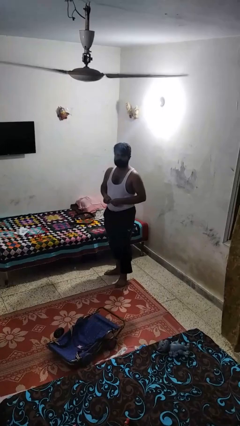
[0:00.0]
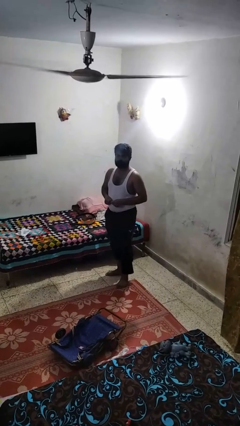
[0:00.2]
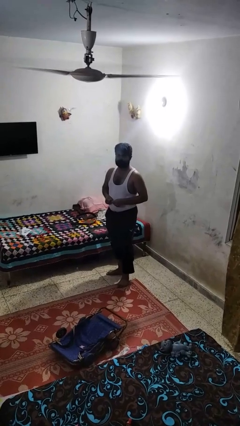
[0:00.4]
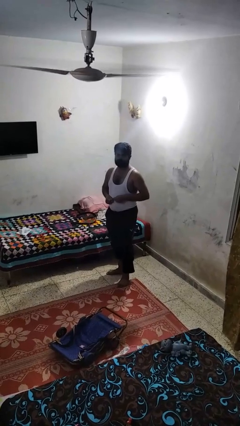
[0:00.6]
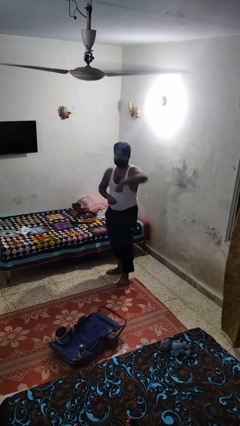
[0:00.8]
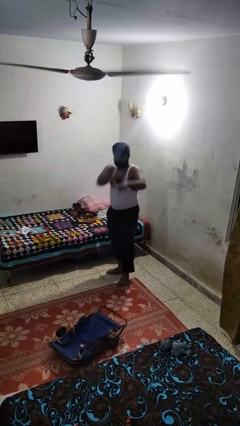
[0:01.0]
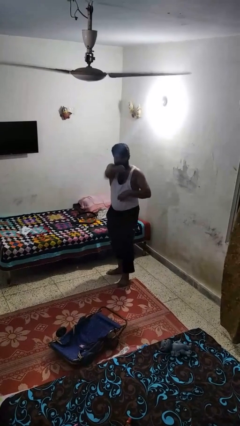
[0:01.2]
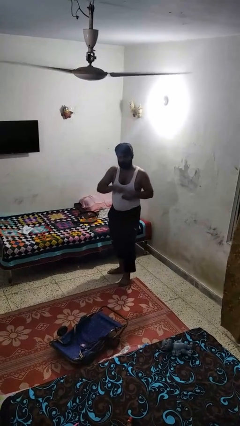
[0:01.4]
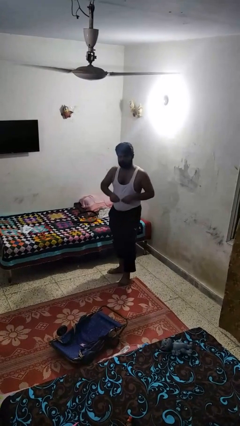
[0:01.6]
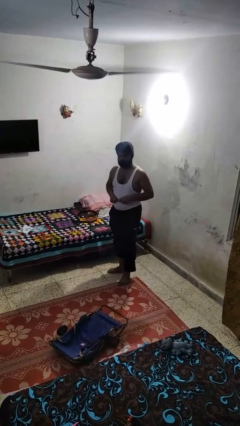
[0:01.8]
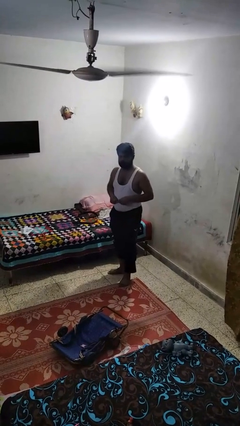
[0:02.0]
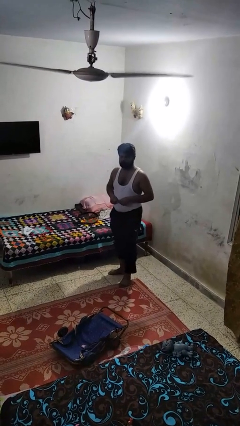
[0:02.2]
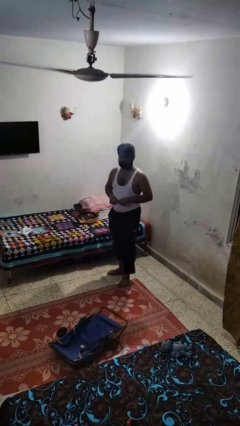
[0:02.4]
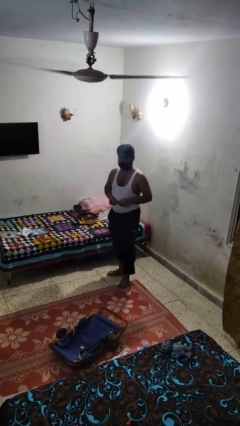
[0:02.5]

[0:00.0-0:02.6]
person karate chop

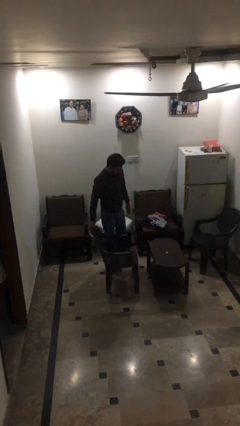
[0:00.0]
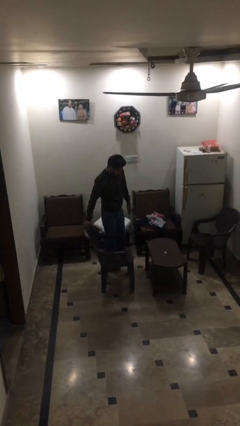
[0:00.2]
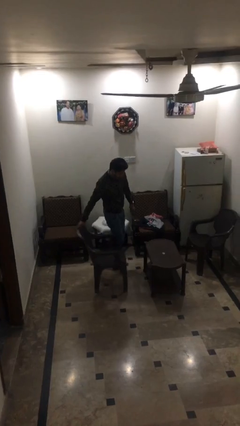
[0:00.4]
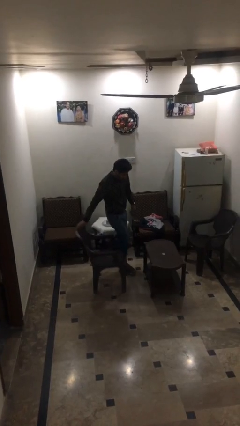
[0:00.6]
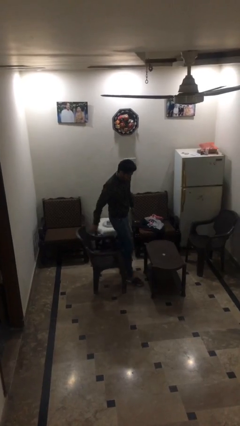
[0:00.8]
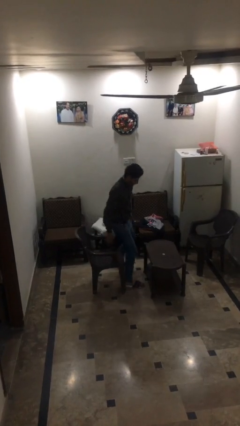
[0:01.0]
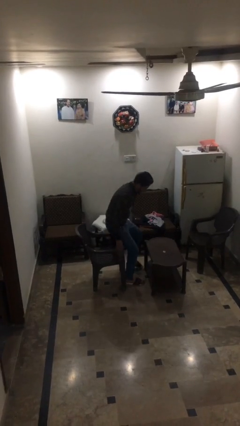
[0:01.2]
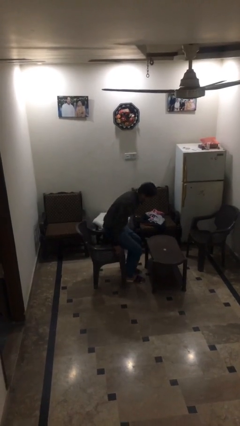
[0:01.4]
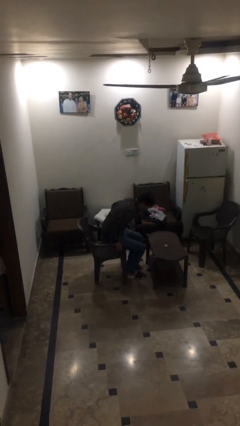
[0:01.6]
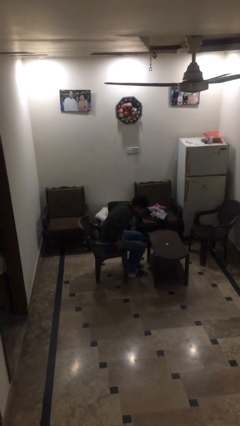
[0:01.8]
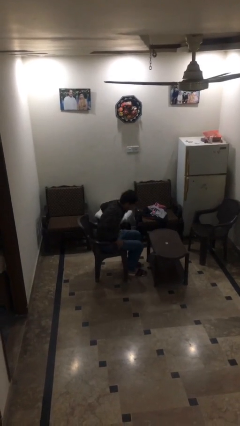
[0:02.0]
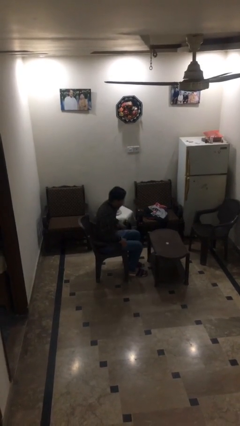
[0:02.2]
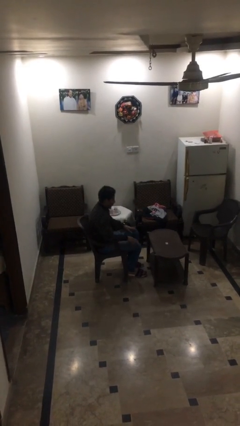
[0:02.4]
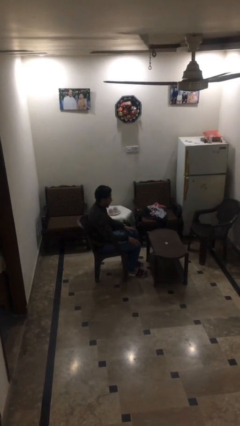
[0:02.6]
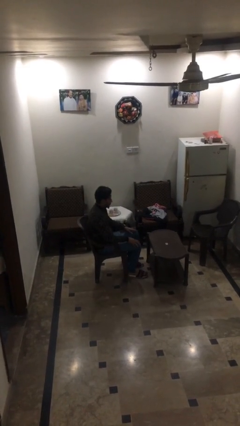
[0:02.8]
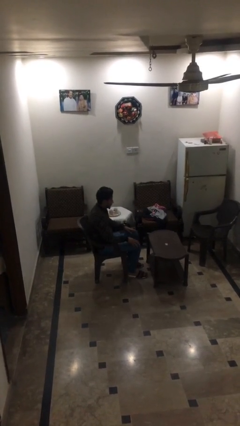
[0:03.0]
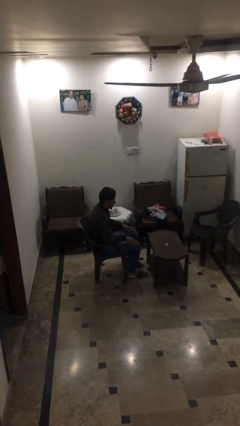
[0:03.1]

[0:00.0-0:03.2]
person sits down

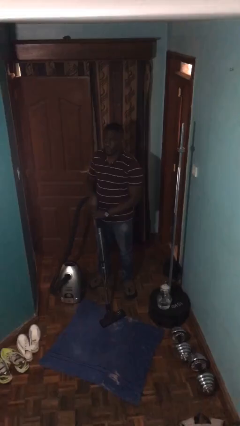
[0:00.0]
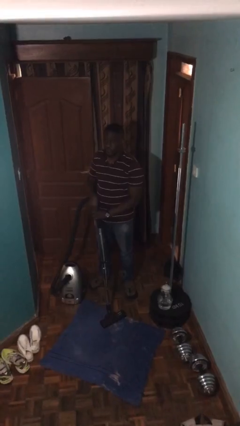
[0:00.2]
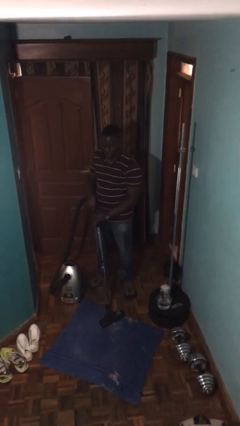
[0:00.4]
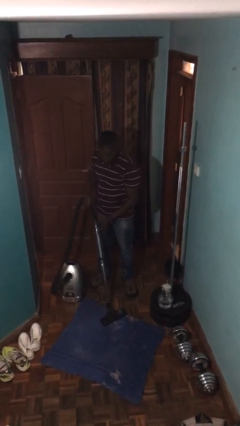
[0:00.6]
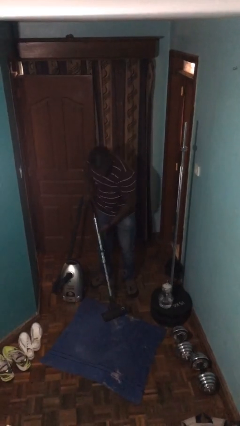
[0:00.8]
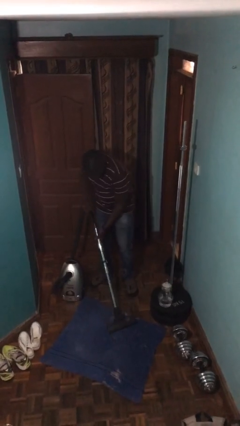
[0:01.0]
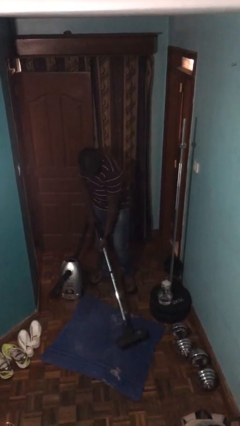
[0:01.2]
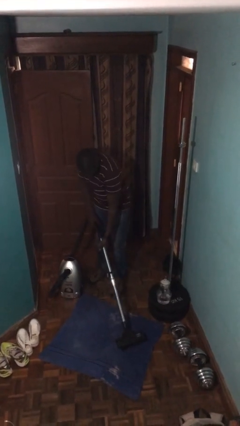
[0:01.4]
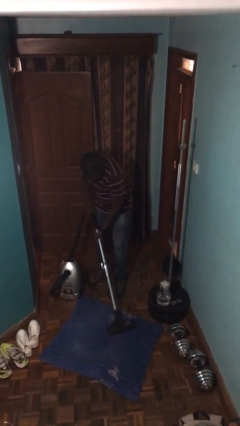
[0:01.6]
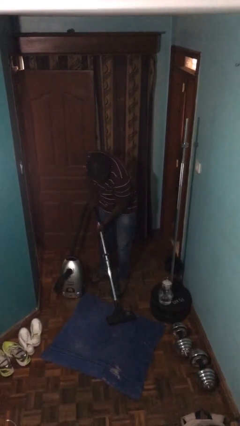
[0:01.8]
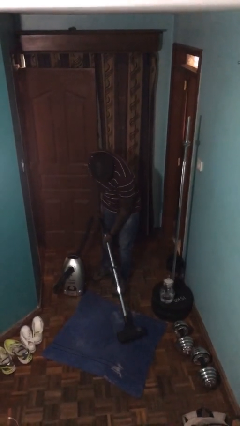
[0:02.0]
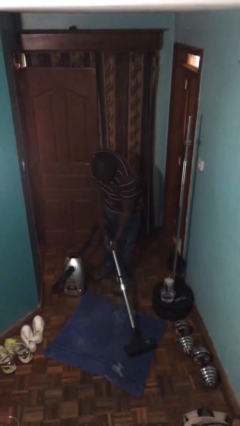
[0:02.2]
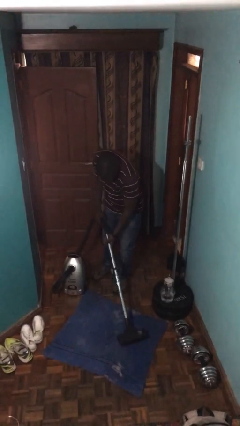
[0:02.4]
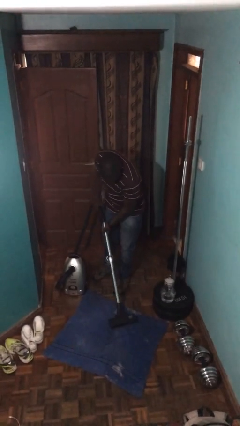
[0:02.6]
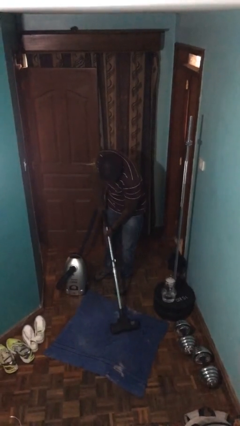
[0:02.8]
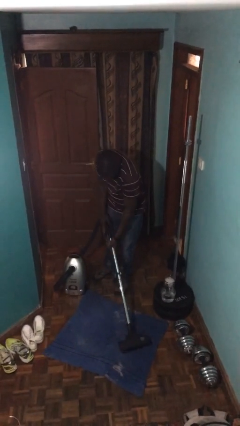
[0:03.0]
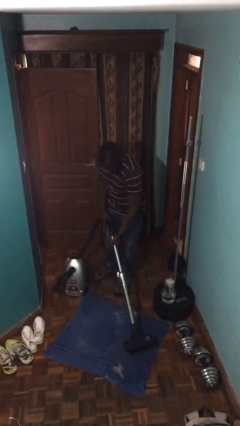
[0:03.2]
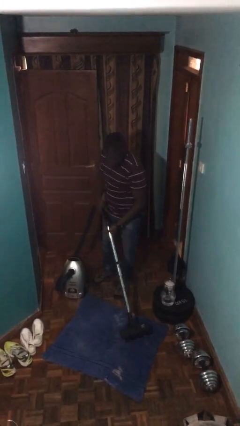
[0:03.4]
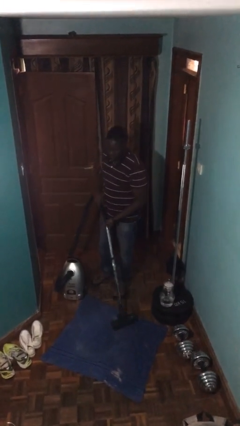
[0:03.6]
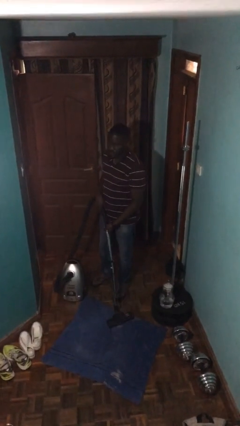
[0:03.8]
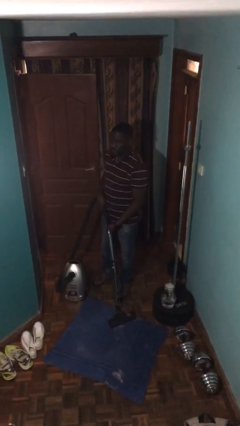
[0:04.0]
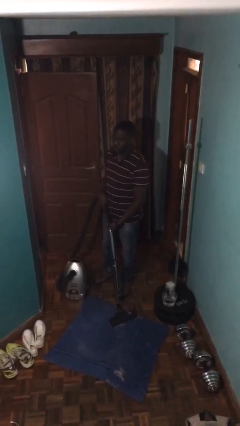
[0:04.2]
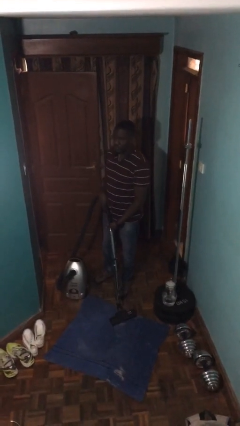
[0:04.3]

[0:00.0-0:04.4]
person vacuums carpet

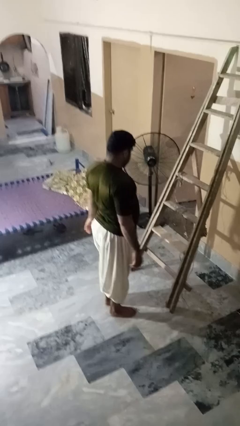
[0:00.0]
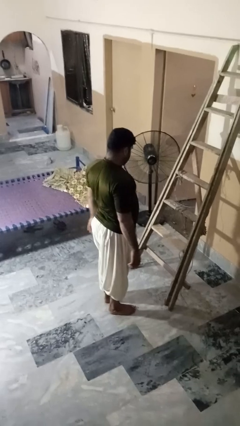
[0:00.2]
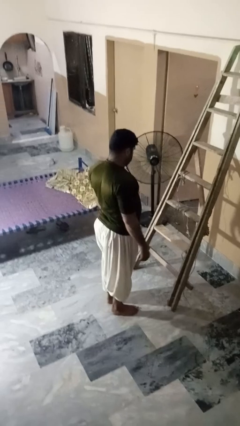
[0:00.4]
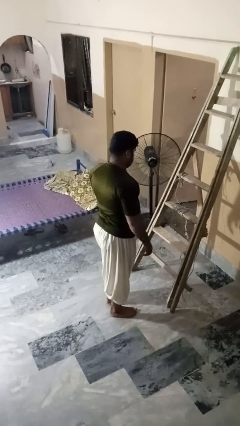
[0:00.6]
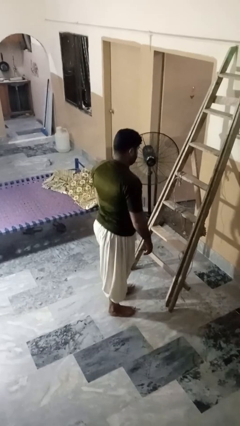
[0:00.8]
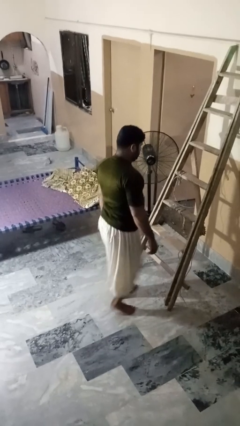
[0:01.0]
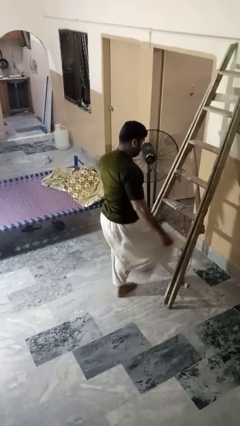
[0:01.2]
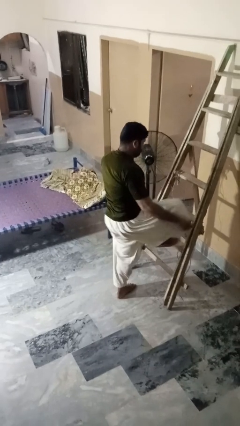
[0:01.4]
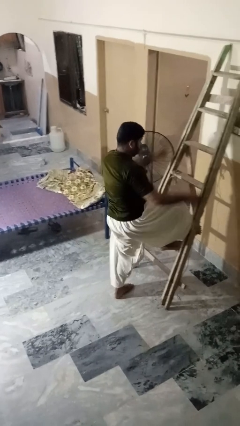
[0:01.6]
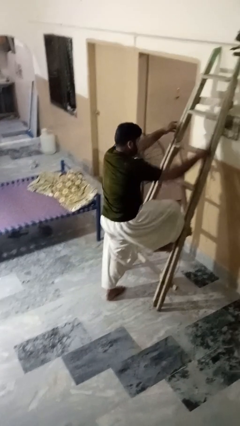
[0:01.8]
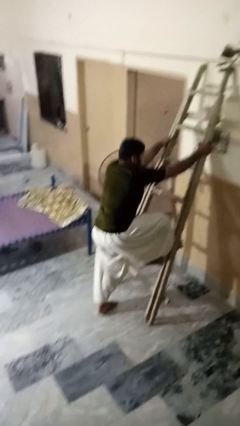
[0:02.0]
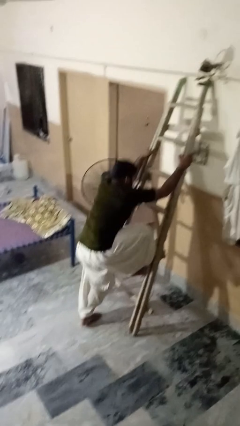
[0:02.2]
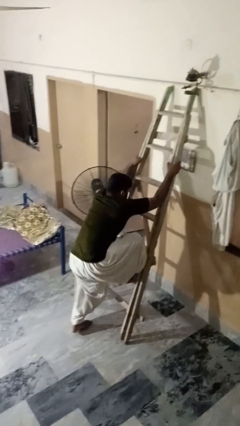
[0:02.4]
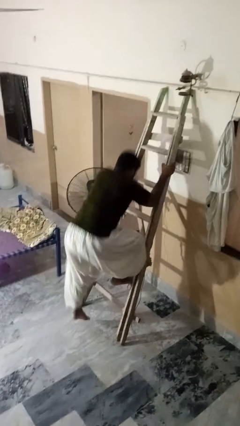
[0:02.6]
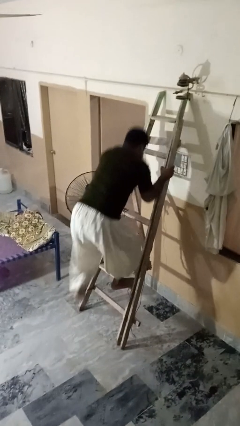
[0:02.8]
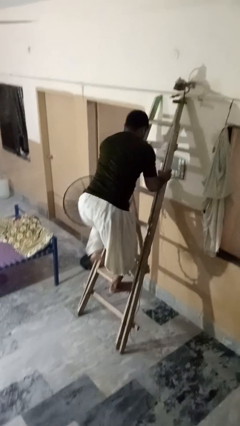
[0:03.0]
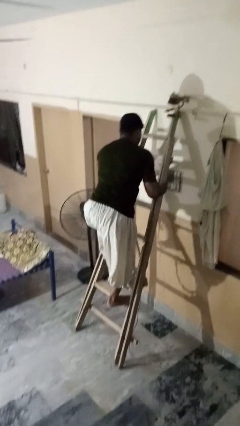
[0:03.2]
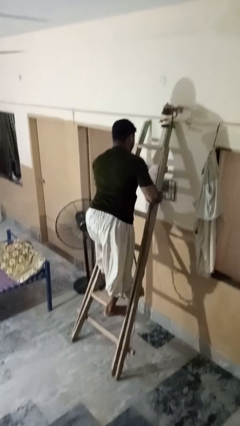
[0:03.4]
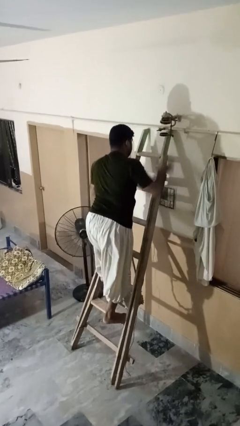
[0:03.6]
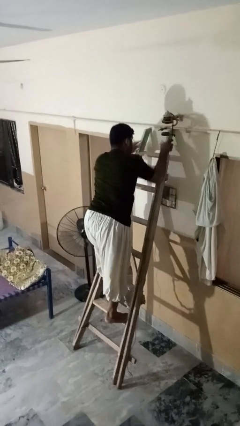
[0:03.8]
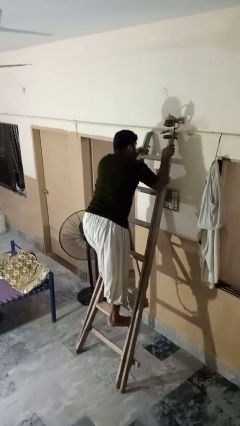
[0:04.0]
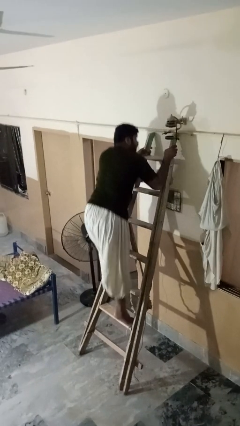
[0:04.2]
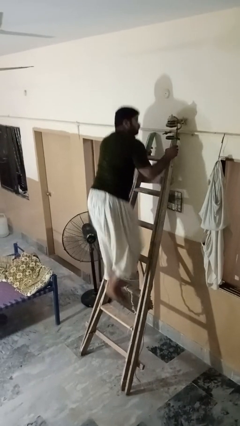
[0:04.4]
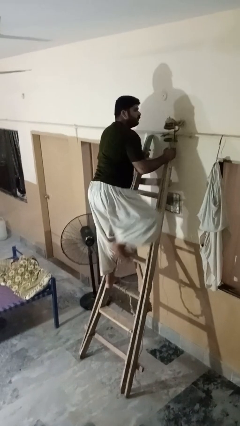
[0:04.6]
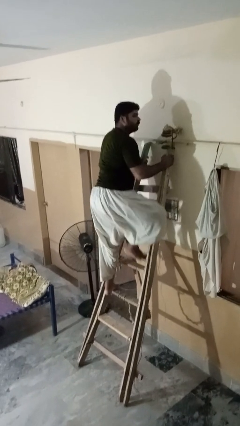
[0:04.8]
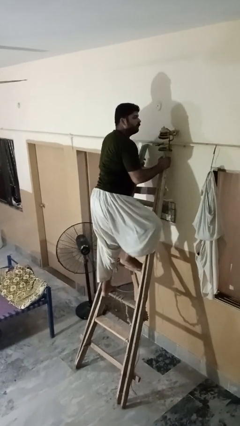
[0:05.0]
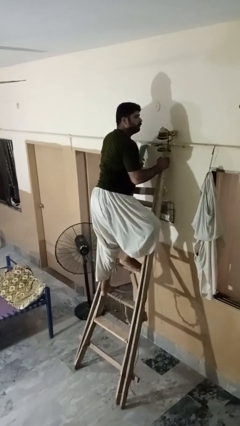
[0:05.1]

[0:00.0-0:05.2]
person climbs up ladder

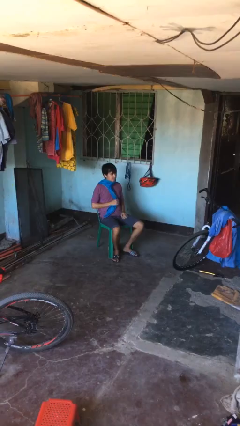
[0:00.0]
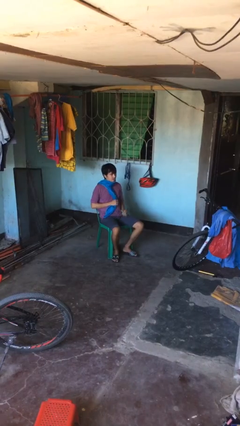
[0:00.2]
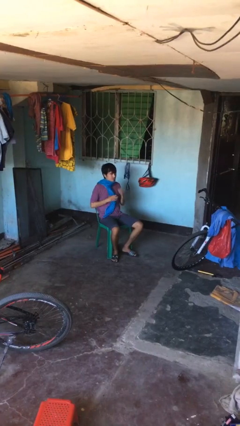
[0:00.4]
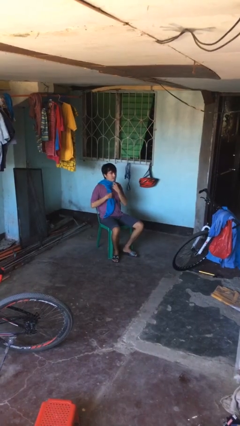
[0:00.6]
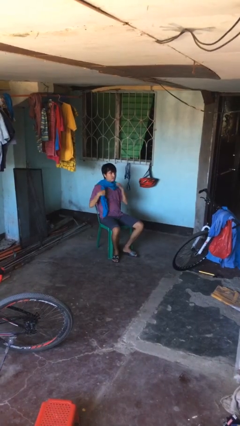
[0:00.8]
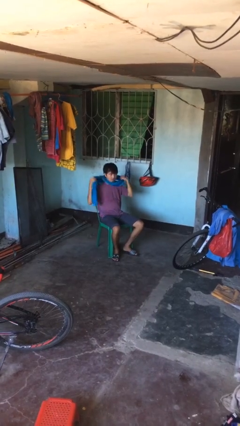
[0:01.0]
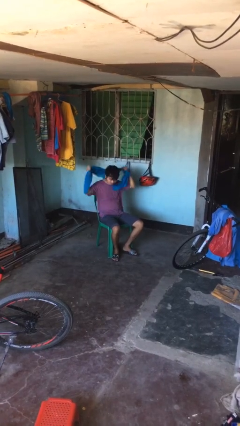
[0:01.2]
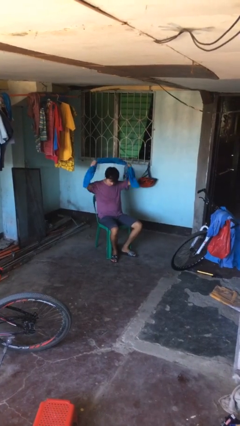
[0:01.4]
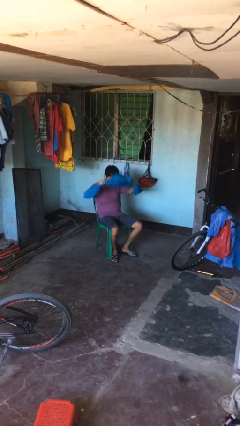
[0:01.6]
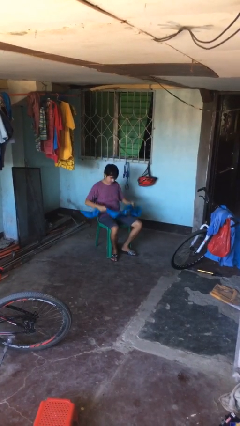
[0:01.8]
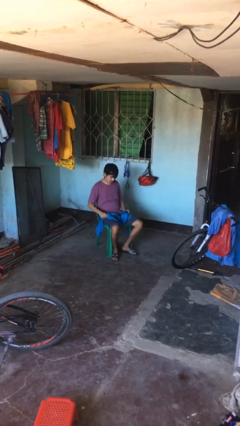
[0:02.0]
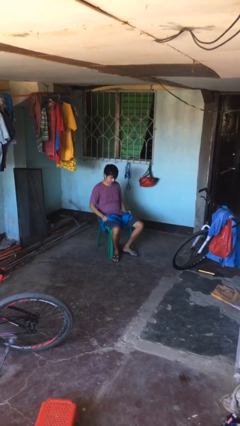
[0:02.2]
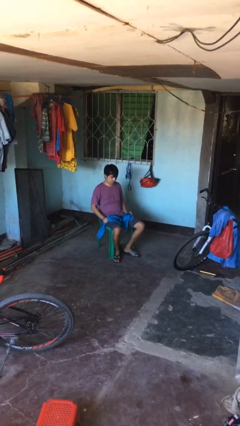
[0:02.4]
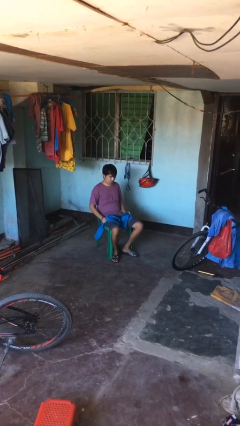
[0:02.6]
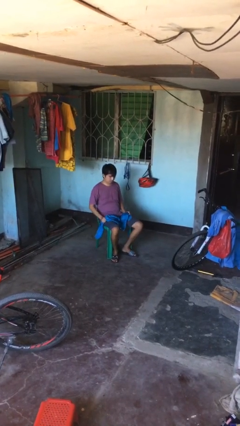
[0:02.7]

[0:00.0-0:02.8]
person takes off scarf
